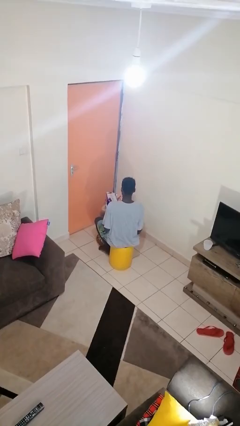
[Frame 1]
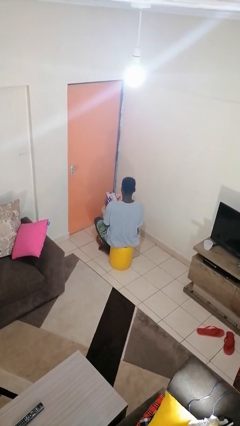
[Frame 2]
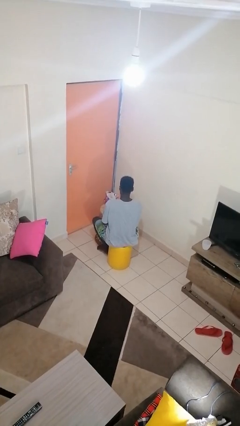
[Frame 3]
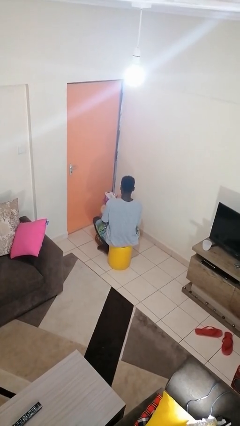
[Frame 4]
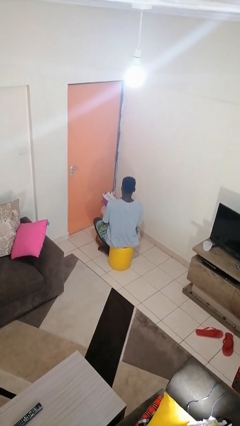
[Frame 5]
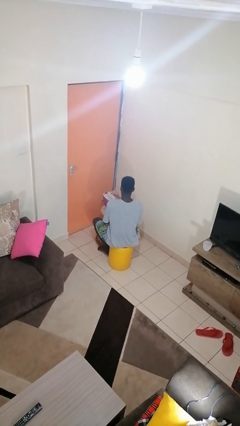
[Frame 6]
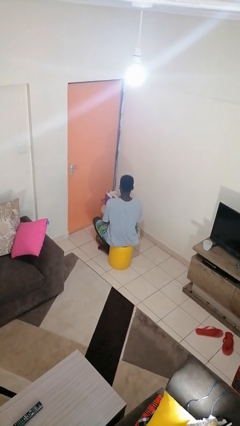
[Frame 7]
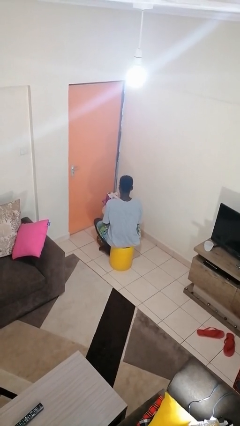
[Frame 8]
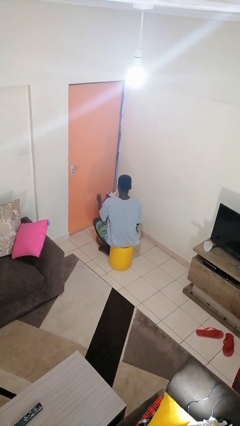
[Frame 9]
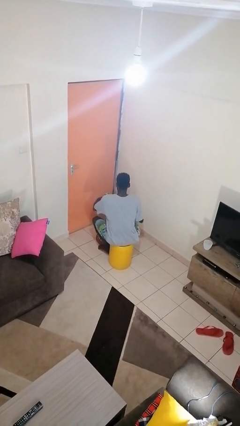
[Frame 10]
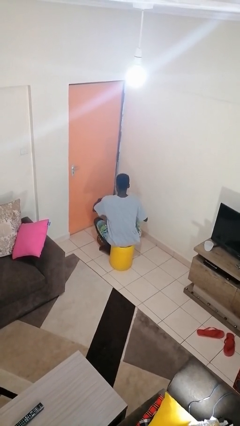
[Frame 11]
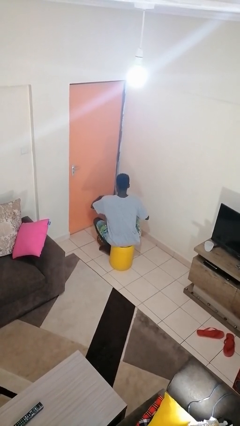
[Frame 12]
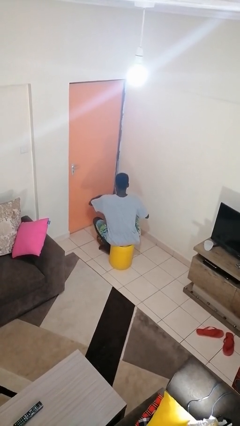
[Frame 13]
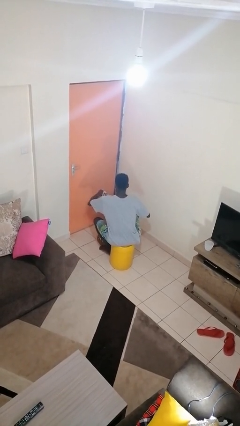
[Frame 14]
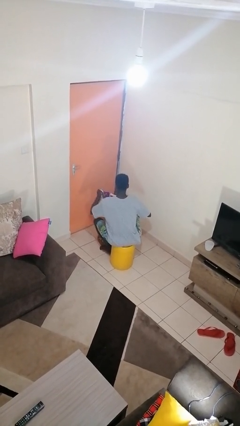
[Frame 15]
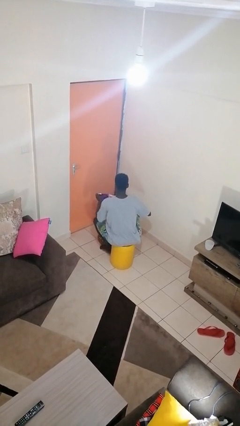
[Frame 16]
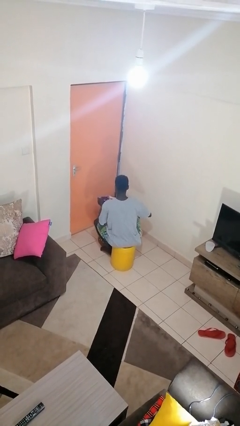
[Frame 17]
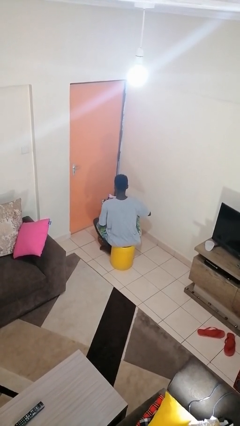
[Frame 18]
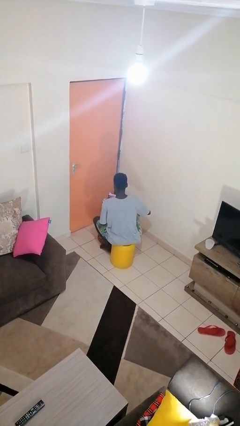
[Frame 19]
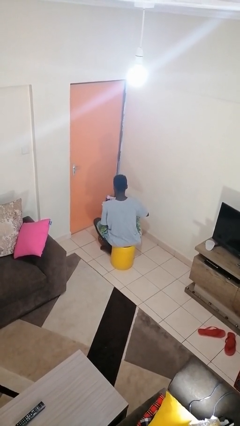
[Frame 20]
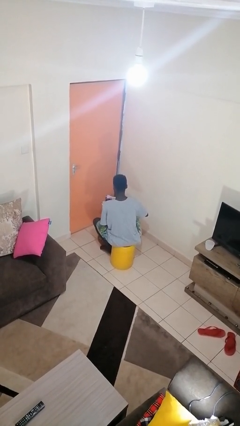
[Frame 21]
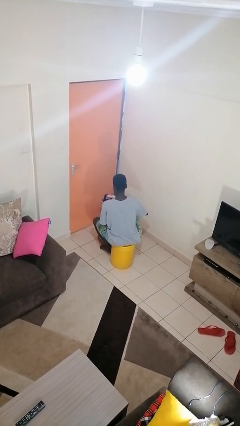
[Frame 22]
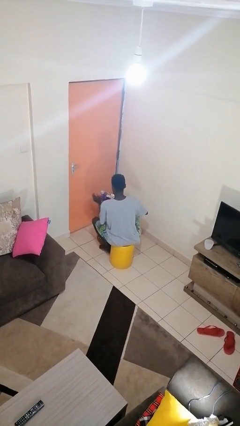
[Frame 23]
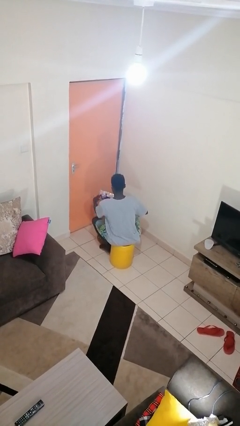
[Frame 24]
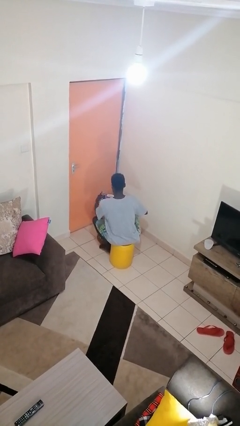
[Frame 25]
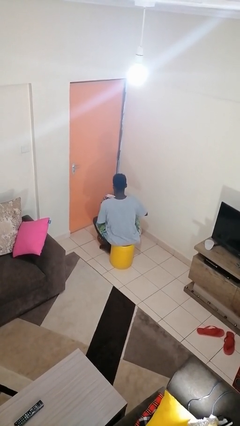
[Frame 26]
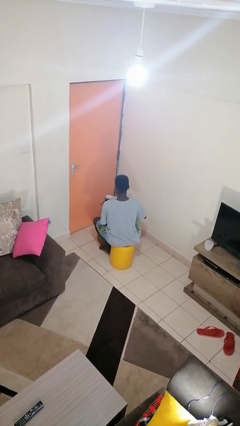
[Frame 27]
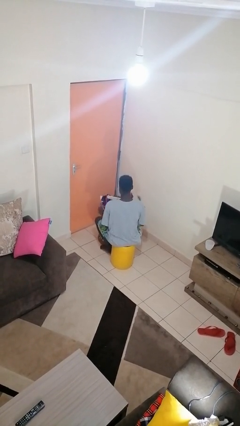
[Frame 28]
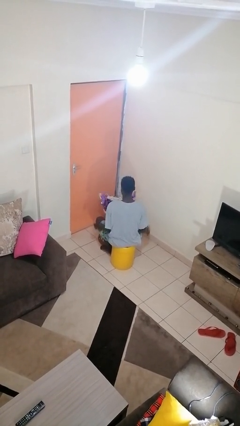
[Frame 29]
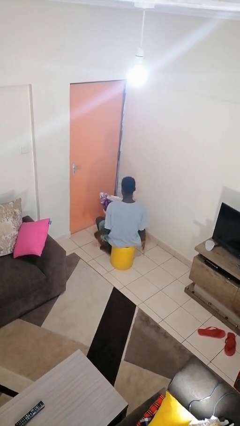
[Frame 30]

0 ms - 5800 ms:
person wraps box

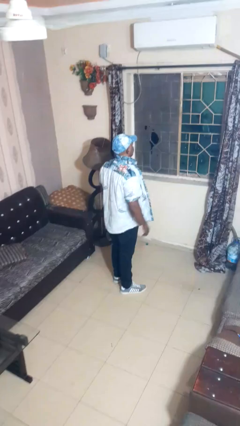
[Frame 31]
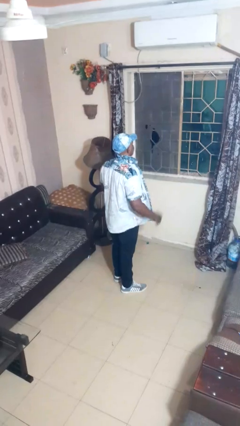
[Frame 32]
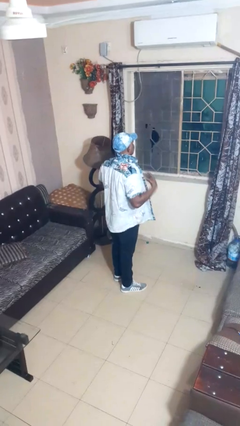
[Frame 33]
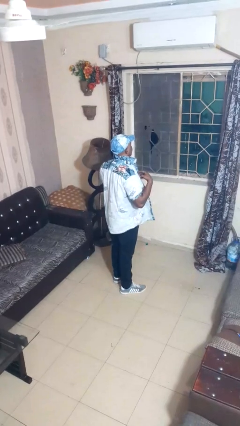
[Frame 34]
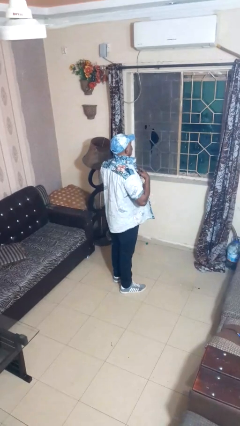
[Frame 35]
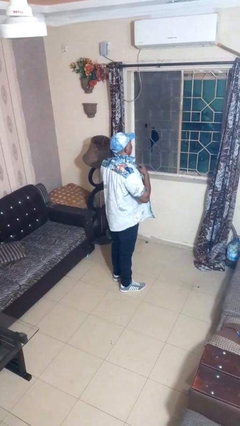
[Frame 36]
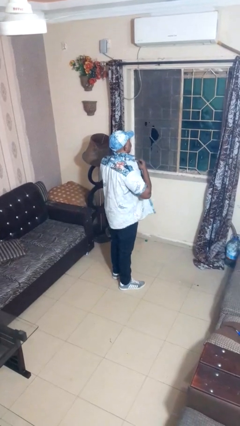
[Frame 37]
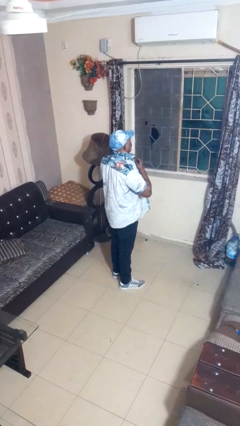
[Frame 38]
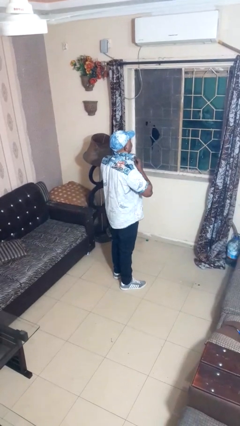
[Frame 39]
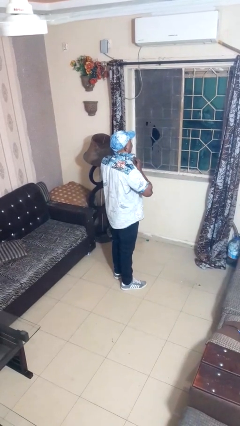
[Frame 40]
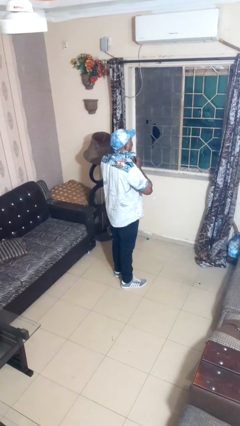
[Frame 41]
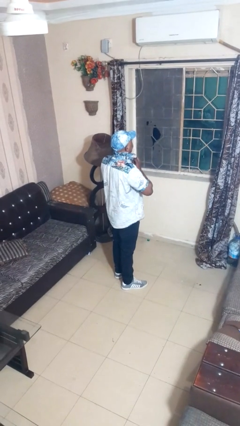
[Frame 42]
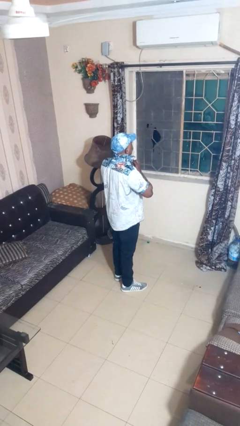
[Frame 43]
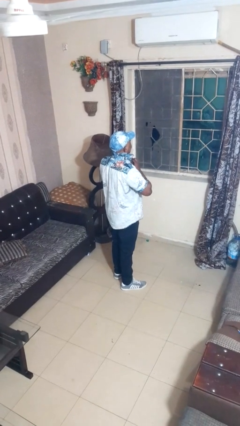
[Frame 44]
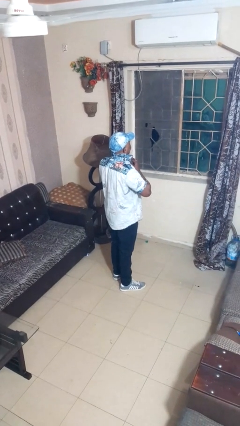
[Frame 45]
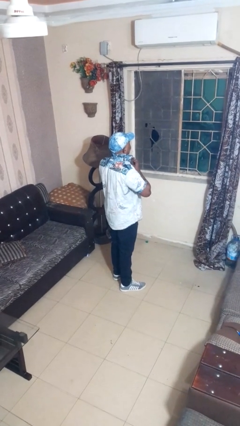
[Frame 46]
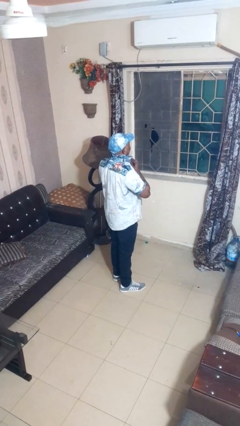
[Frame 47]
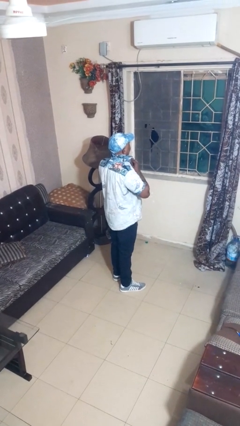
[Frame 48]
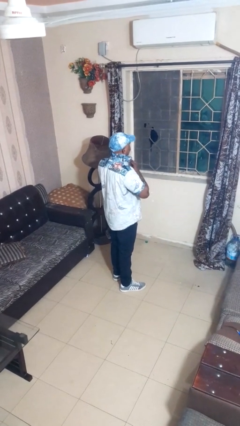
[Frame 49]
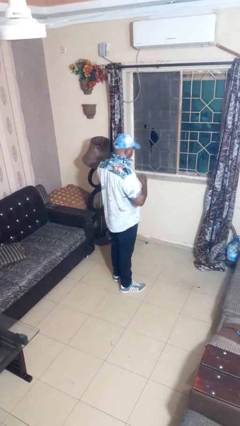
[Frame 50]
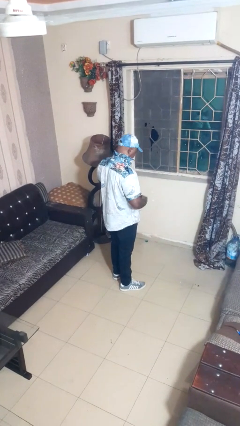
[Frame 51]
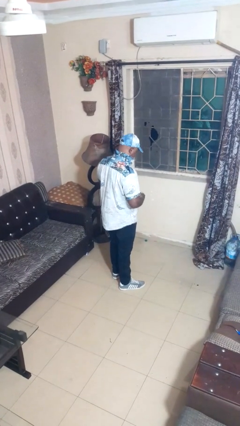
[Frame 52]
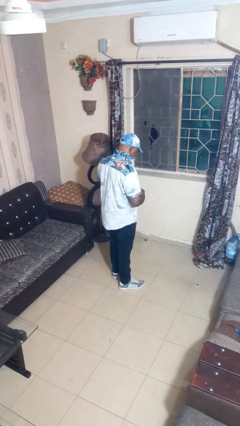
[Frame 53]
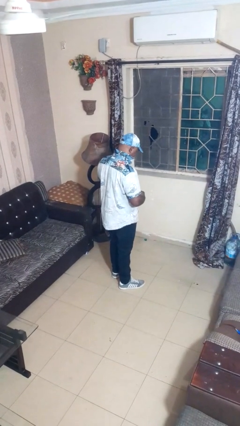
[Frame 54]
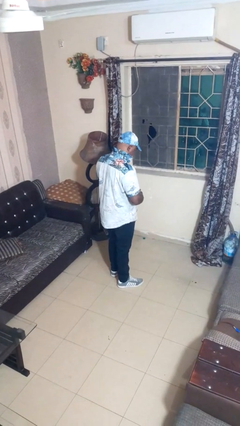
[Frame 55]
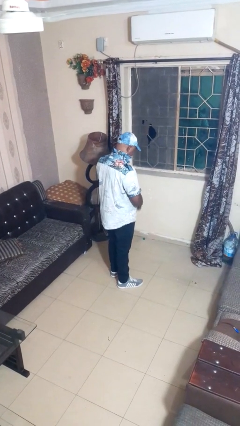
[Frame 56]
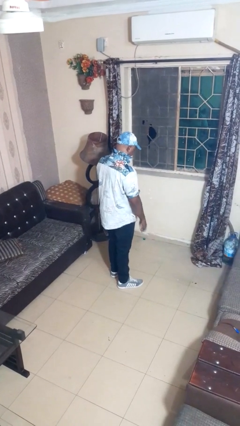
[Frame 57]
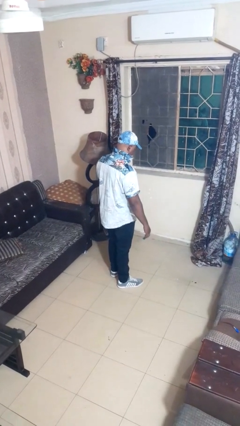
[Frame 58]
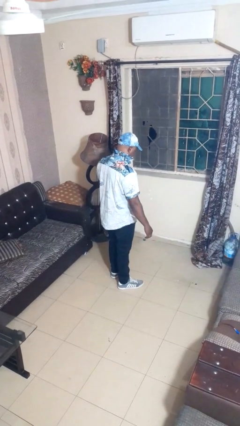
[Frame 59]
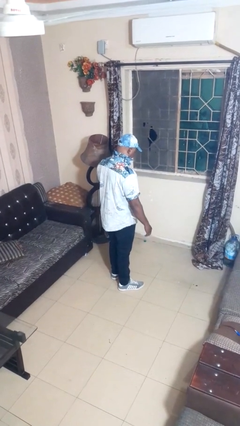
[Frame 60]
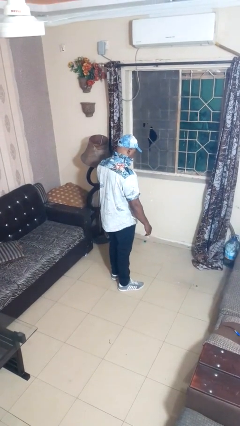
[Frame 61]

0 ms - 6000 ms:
person buttons shirt

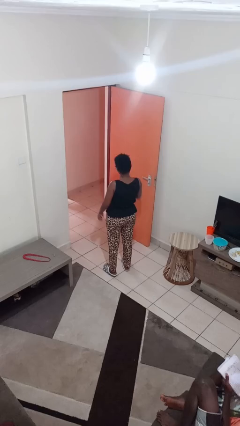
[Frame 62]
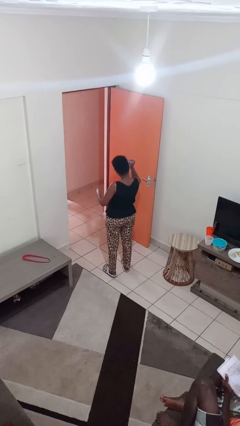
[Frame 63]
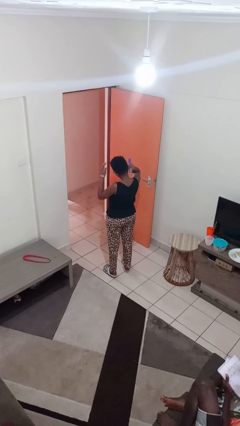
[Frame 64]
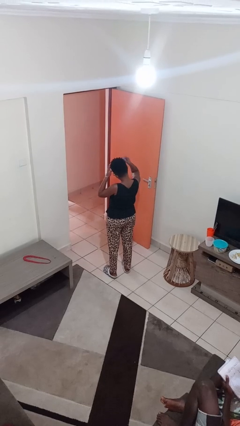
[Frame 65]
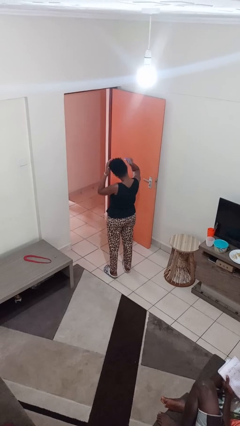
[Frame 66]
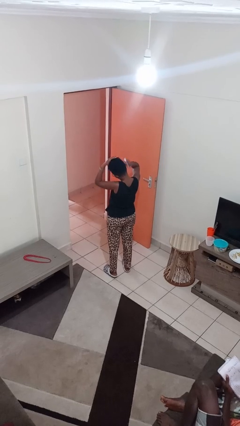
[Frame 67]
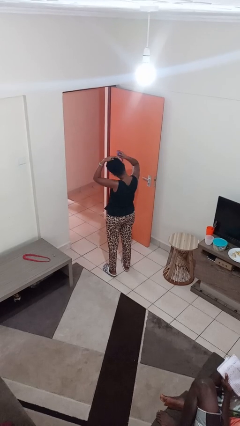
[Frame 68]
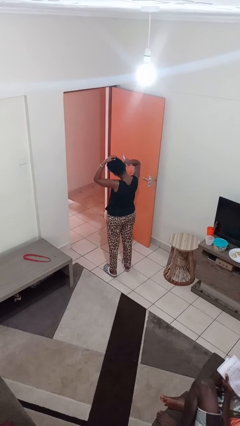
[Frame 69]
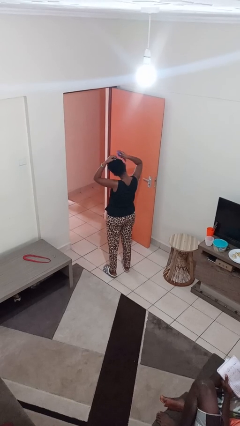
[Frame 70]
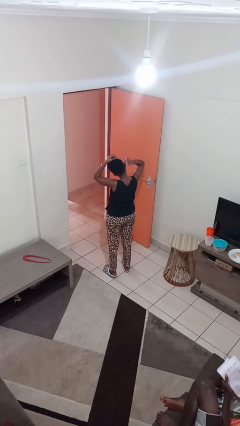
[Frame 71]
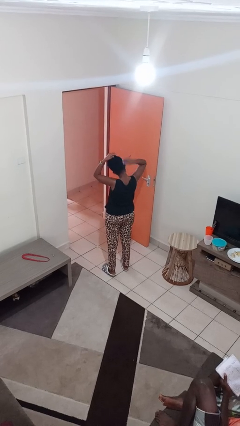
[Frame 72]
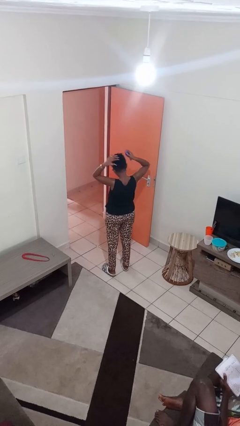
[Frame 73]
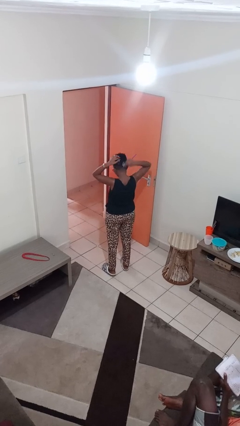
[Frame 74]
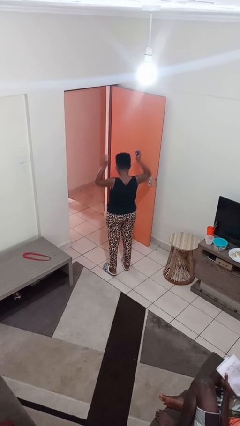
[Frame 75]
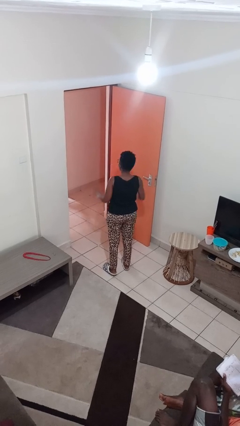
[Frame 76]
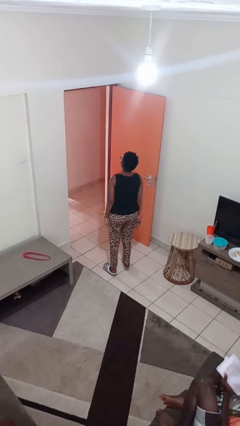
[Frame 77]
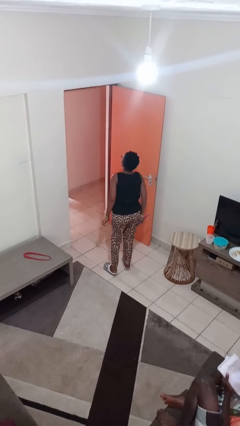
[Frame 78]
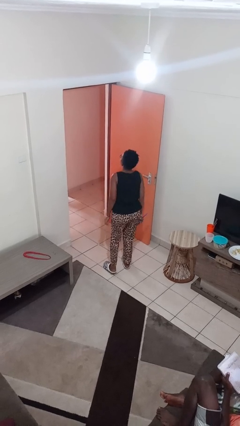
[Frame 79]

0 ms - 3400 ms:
person brushes hair

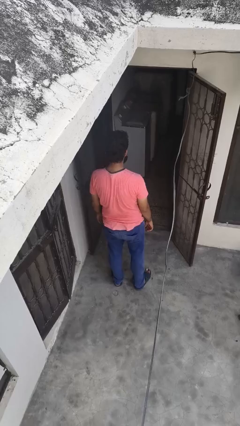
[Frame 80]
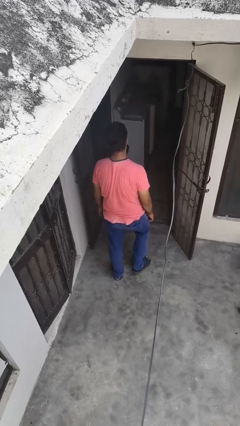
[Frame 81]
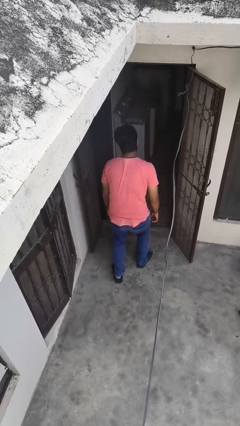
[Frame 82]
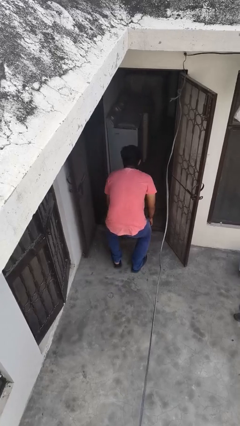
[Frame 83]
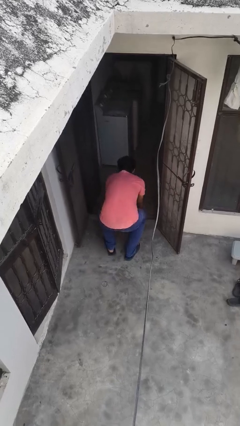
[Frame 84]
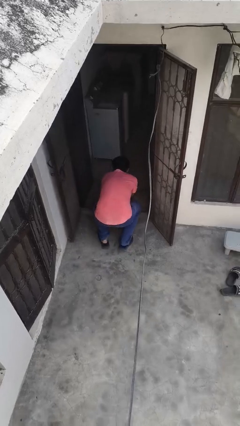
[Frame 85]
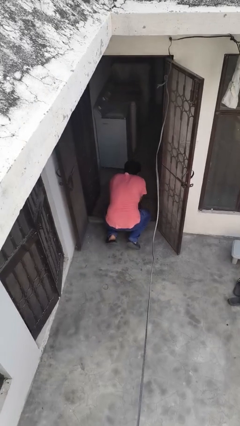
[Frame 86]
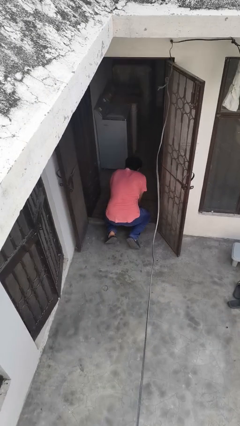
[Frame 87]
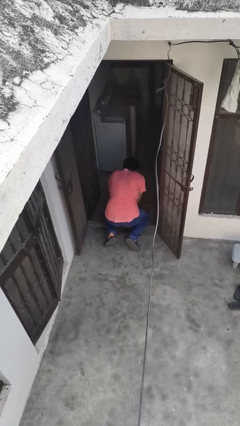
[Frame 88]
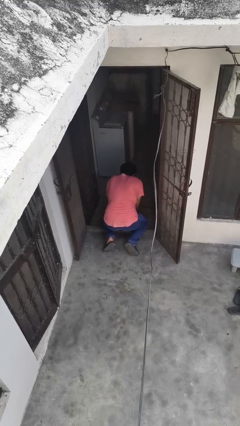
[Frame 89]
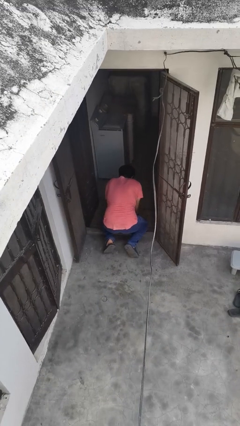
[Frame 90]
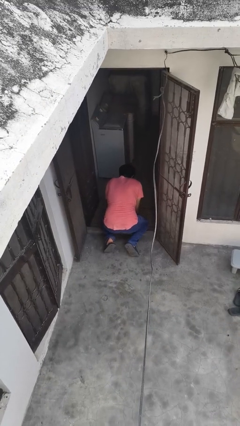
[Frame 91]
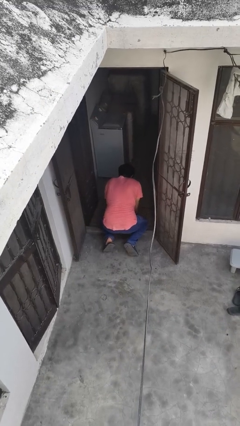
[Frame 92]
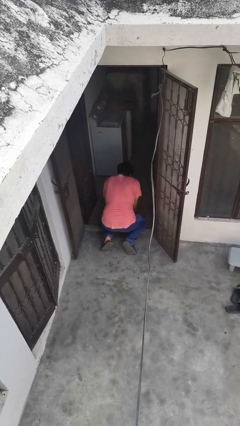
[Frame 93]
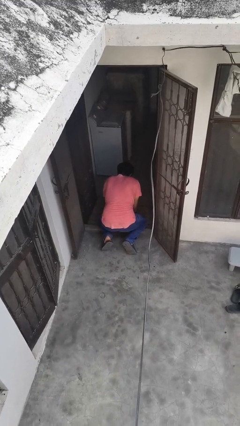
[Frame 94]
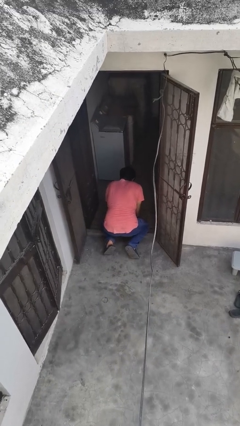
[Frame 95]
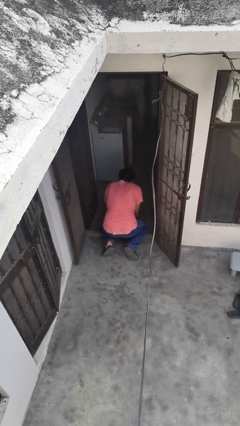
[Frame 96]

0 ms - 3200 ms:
person trips on object on floor
